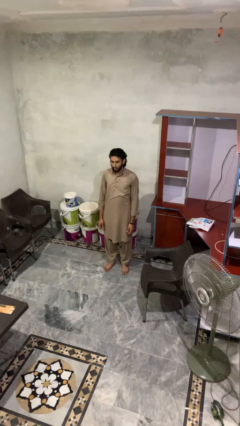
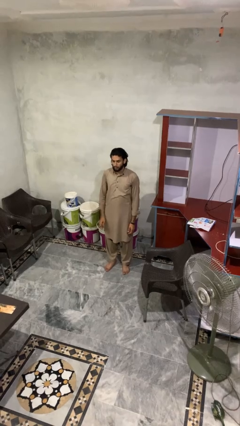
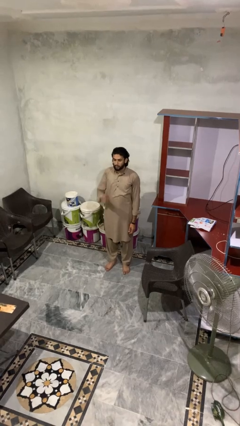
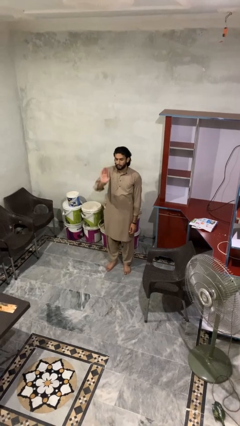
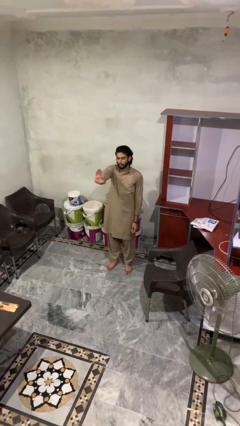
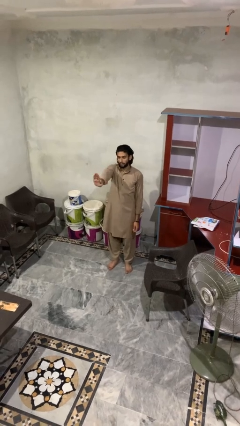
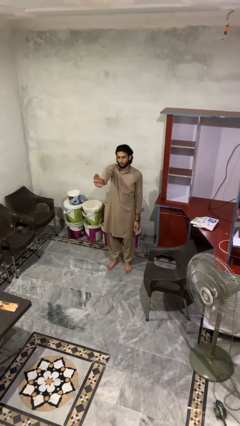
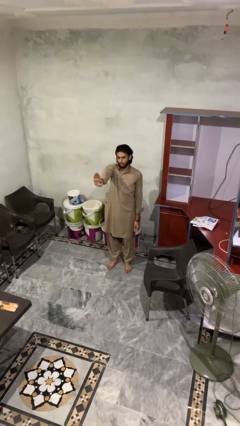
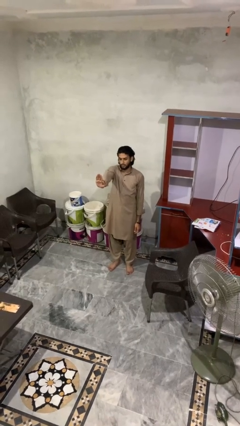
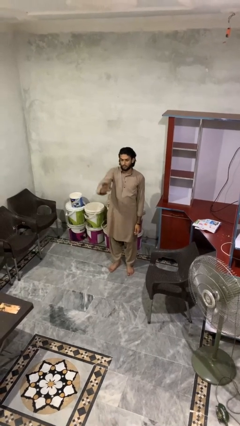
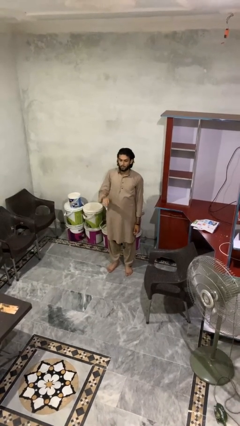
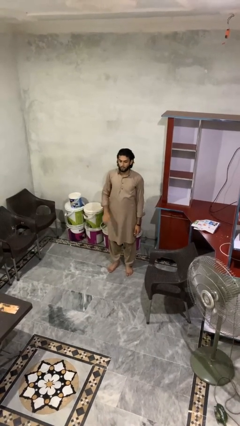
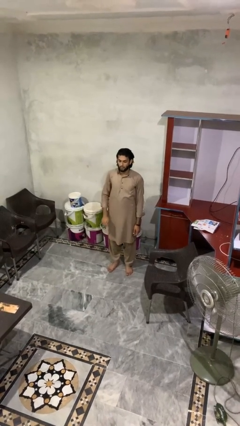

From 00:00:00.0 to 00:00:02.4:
person gestures stop

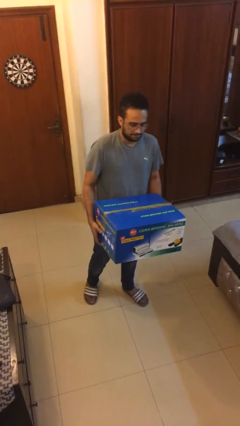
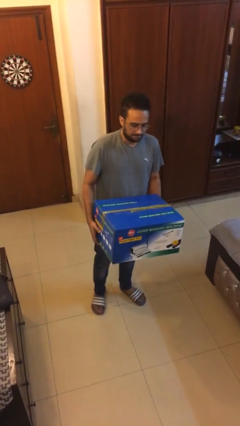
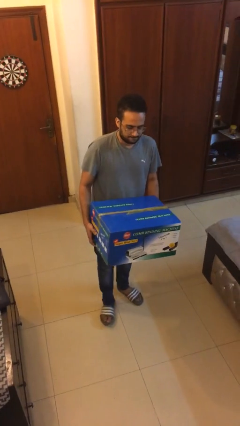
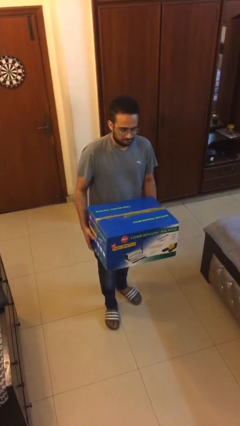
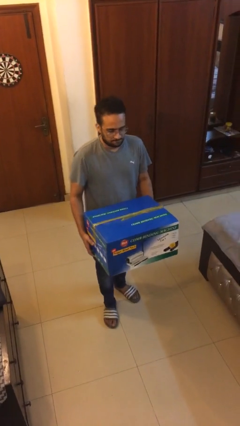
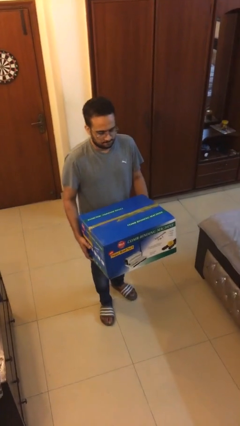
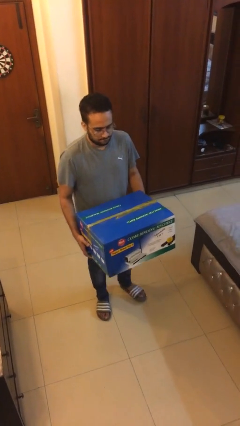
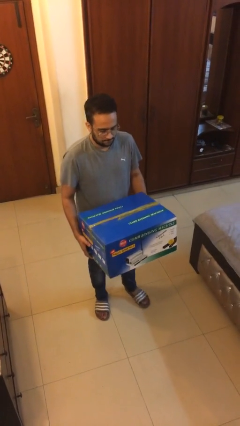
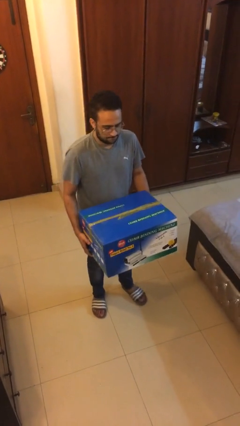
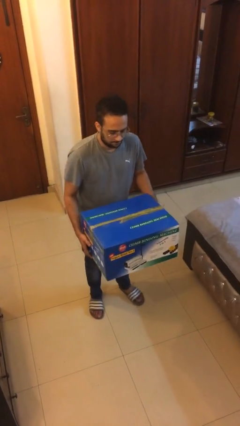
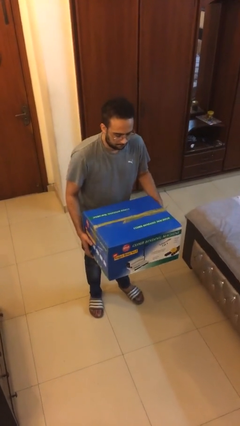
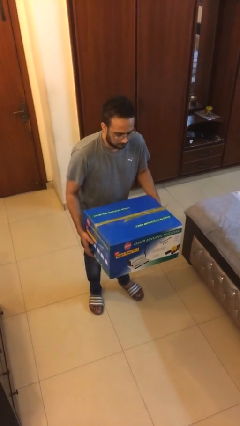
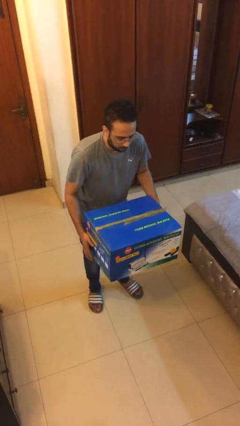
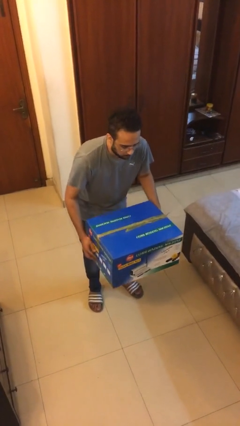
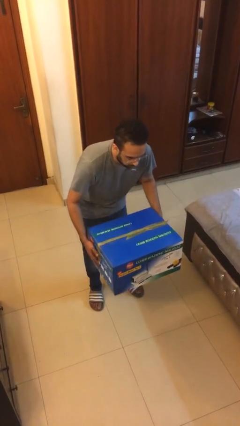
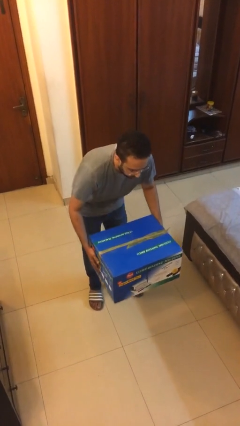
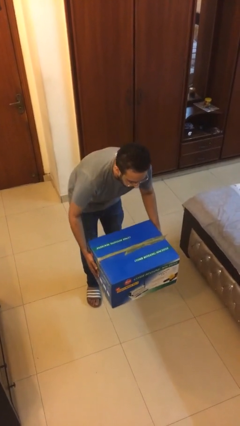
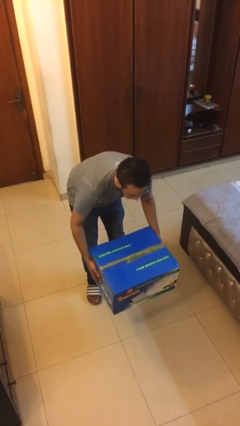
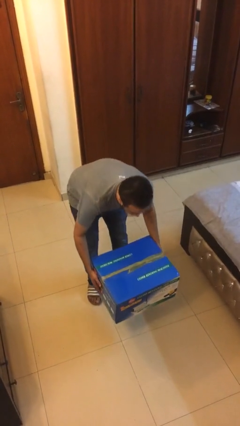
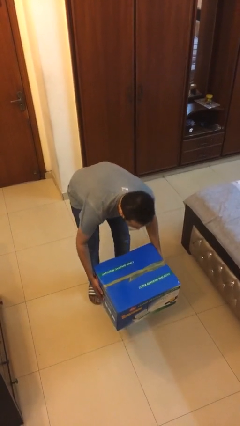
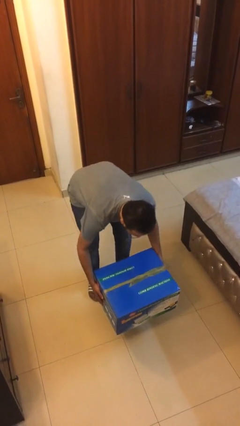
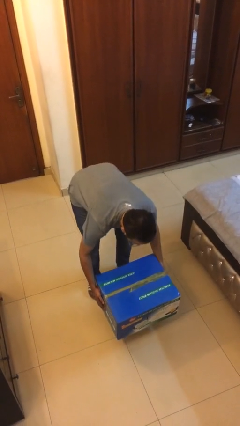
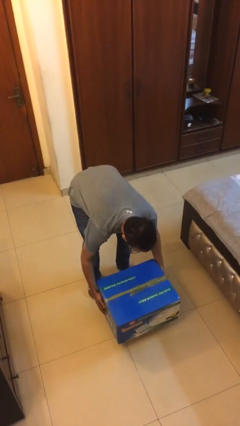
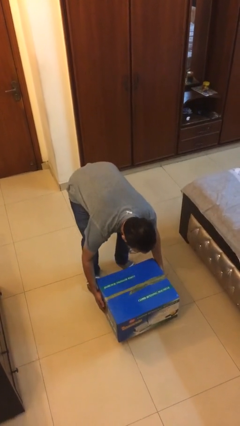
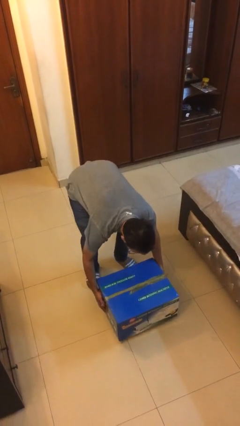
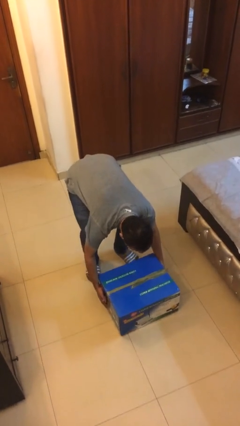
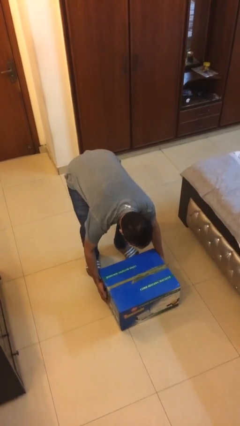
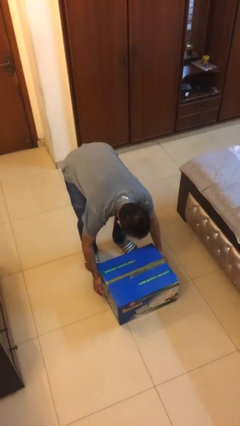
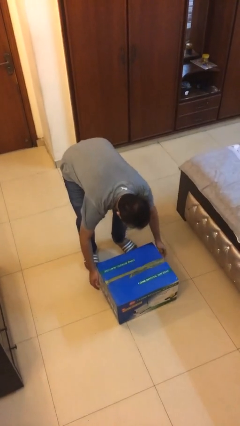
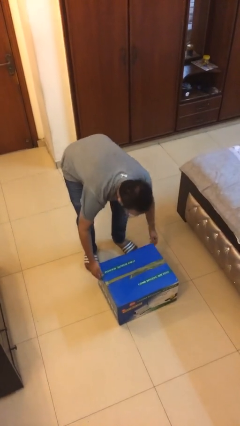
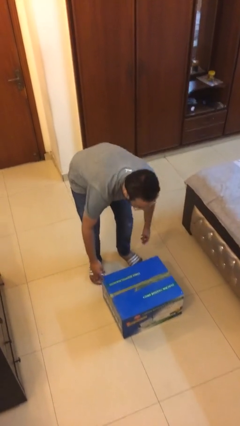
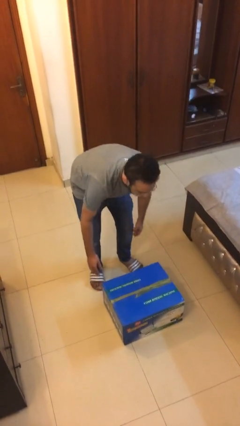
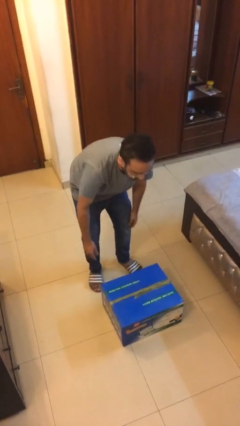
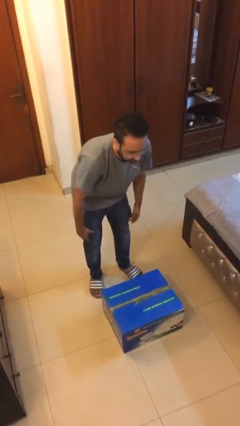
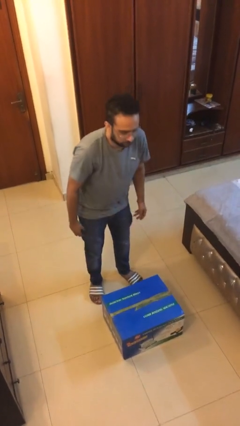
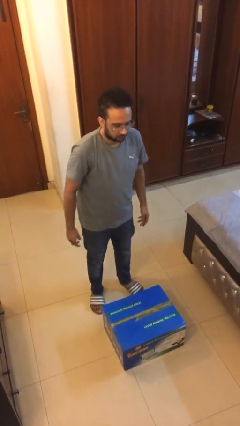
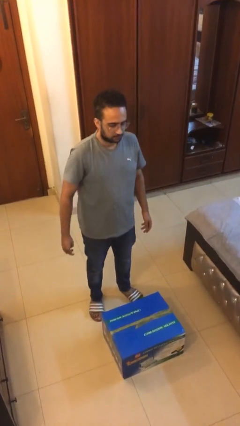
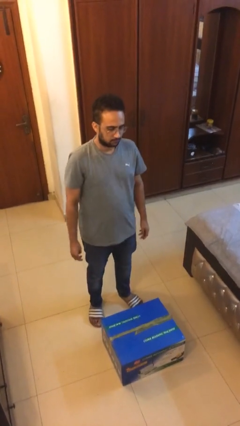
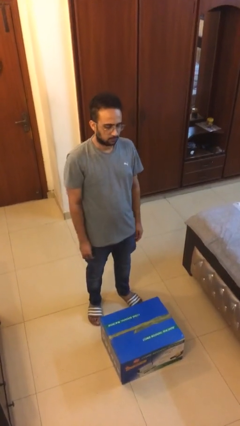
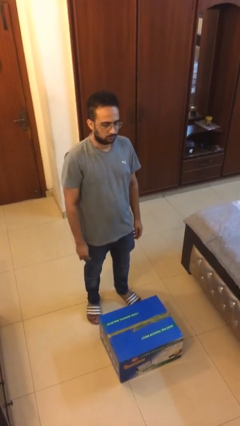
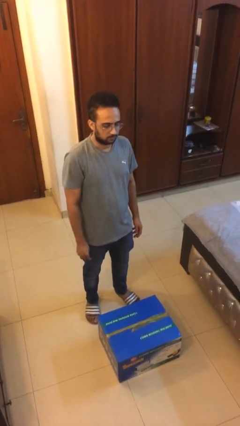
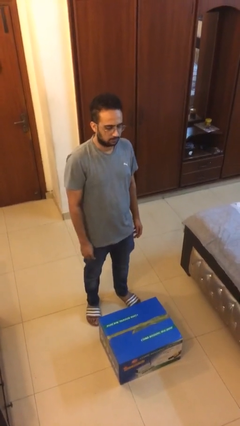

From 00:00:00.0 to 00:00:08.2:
person puts down object on floor

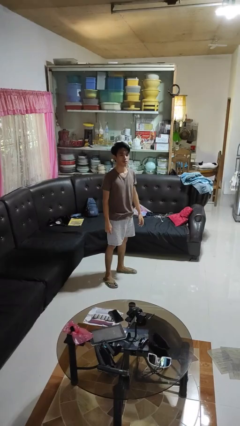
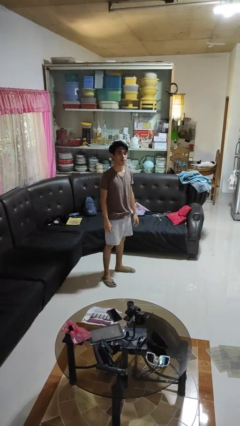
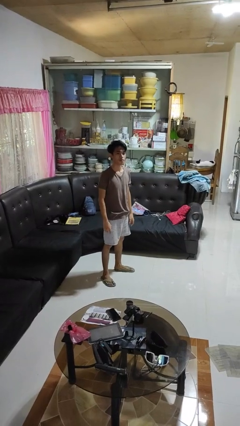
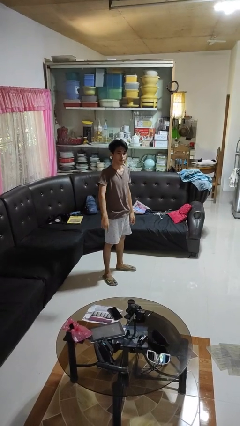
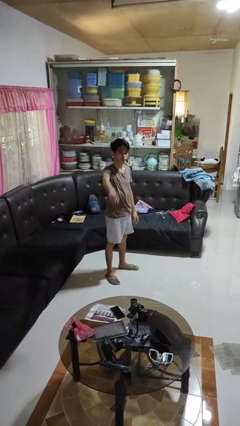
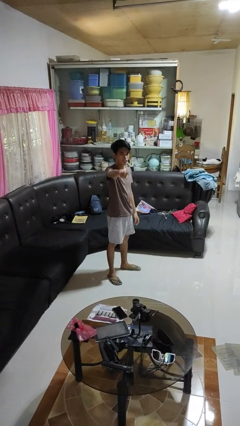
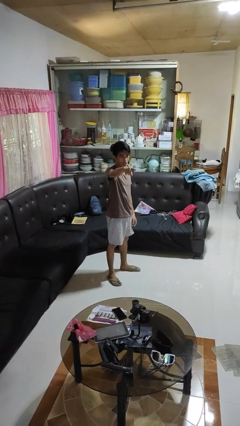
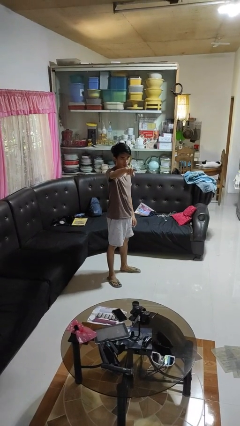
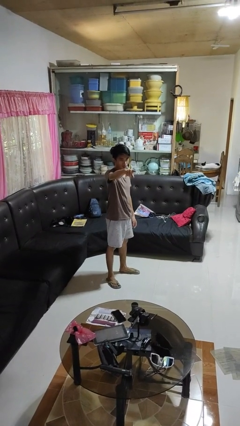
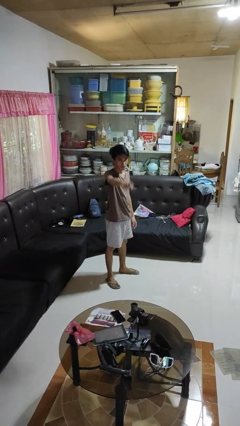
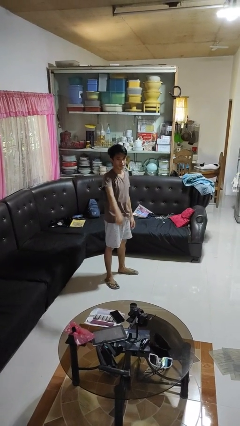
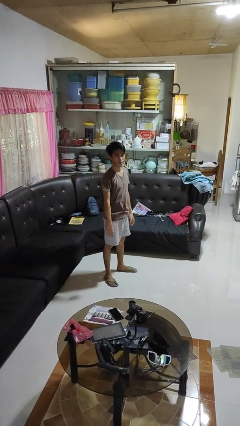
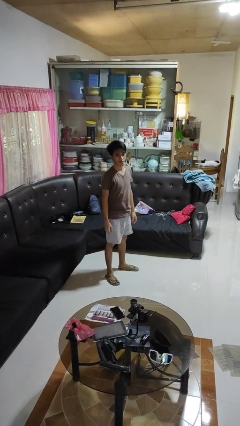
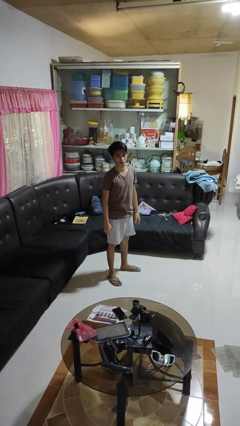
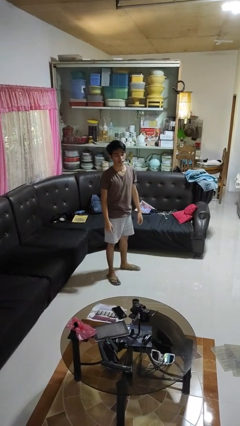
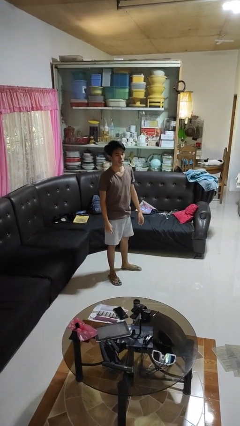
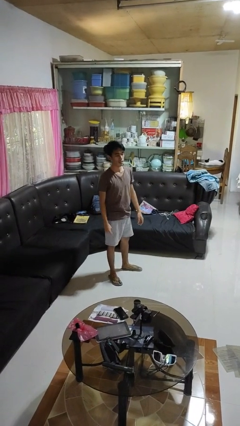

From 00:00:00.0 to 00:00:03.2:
person points at person

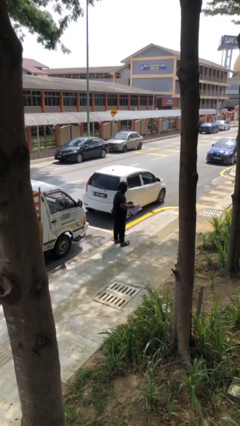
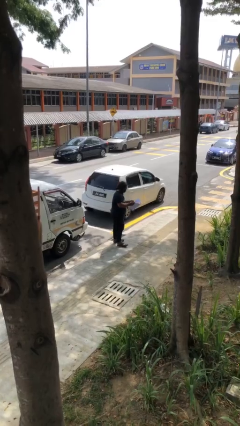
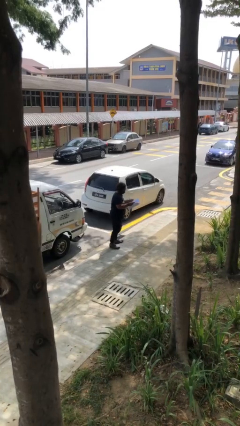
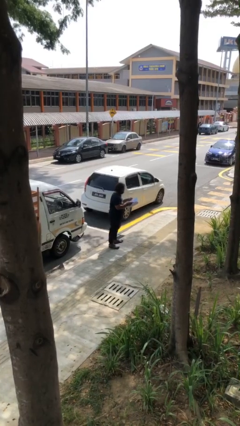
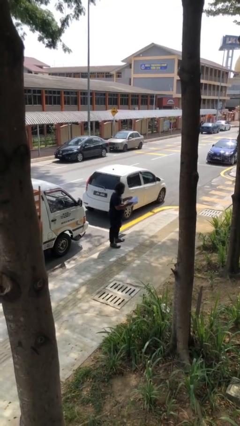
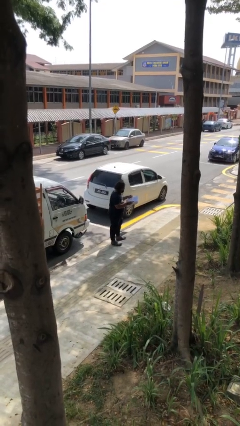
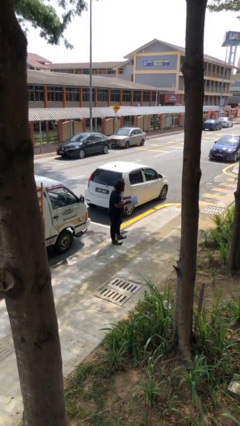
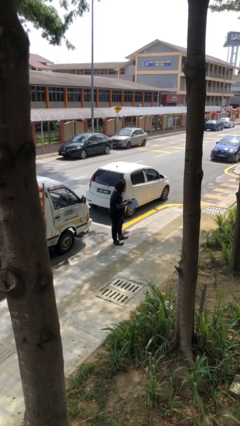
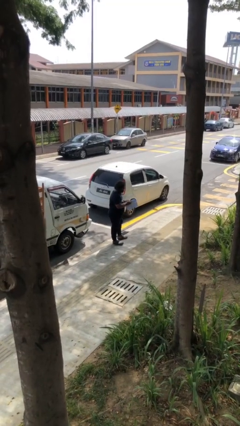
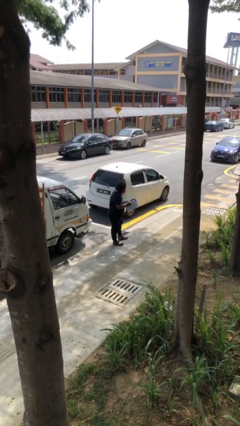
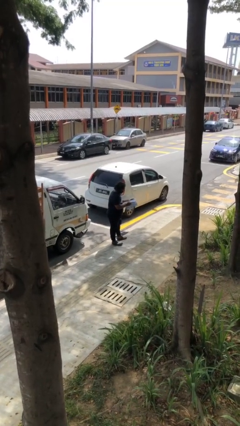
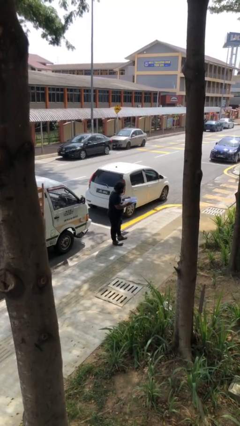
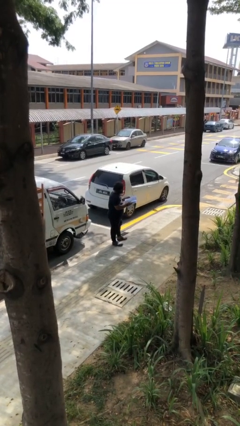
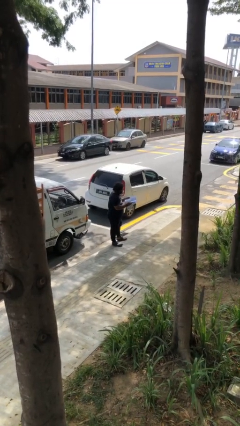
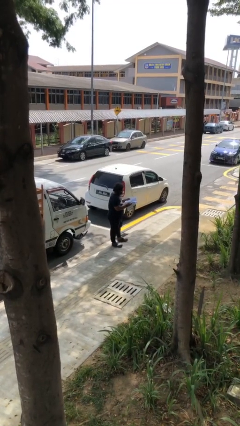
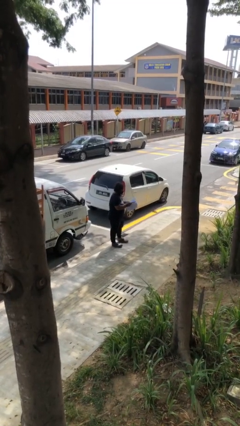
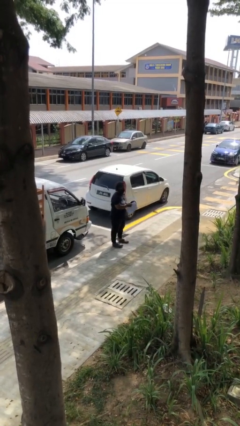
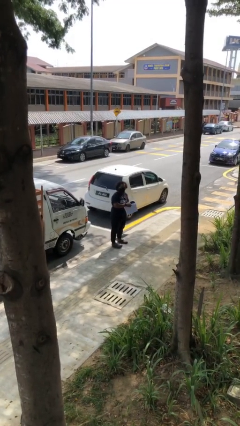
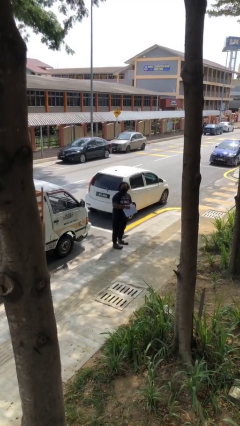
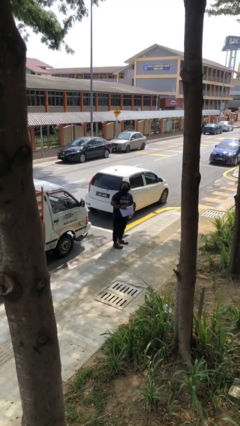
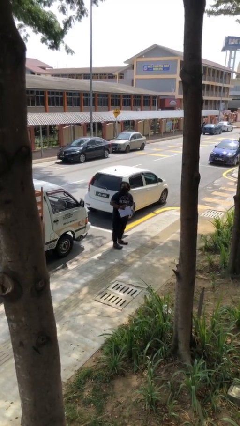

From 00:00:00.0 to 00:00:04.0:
person reads document
